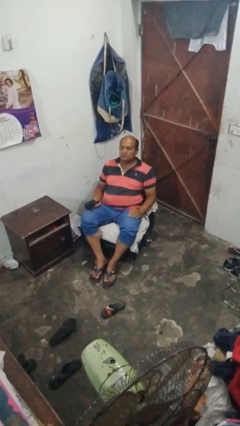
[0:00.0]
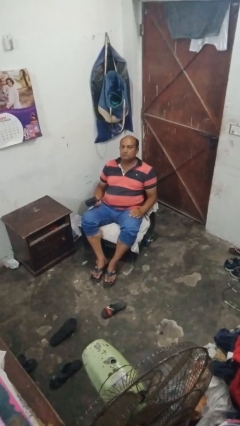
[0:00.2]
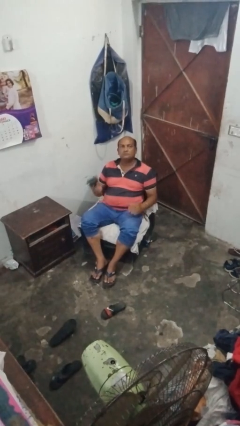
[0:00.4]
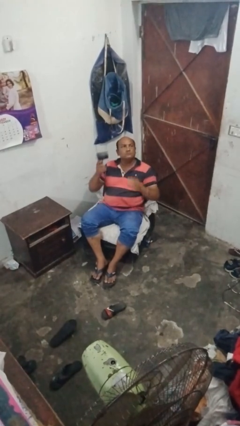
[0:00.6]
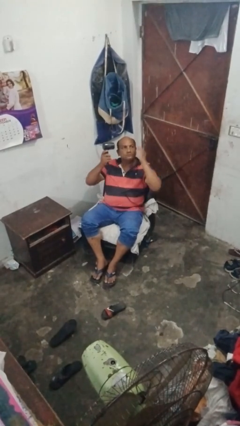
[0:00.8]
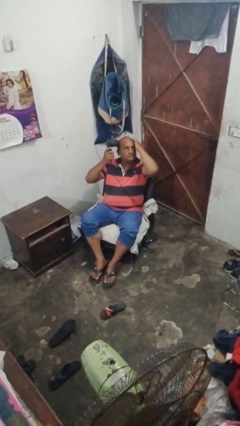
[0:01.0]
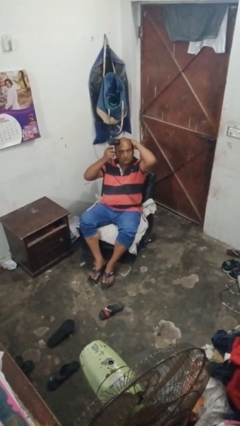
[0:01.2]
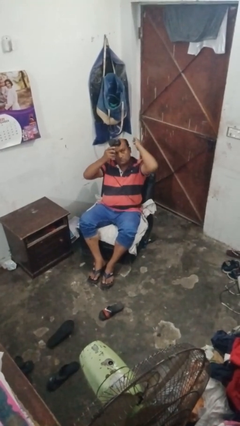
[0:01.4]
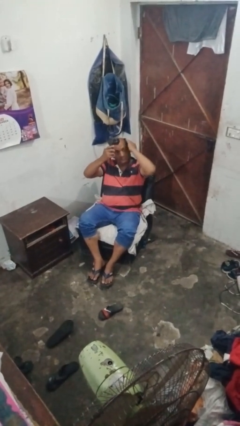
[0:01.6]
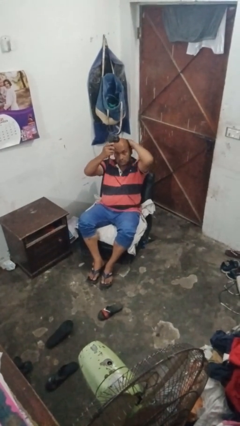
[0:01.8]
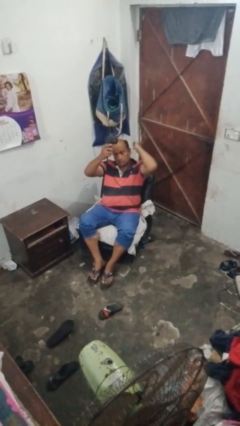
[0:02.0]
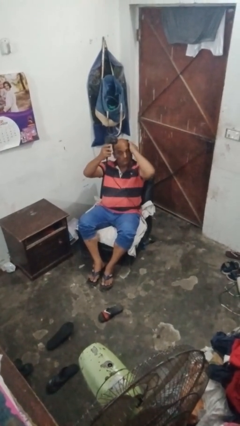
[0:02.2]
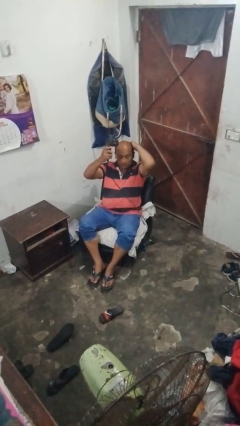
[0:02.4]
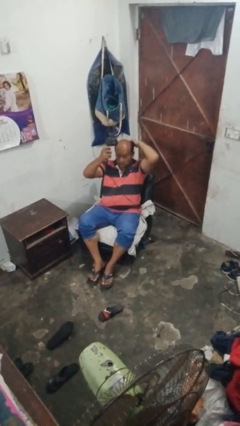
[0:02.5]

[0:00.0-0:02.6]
person dries hair with hairdryer

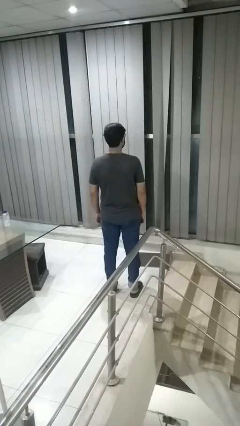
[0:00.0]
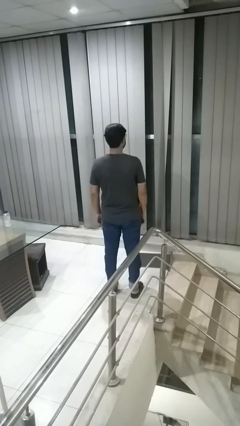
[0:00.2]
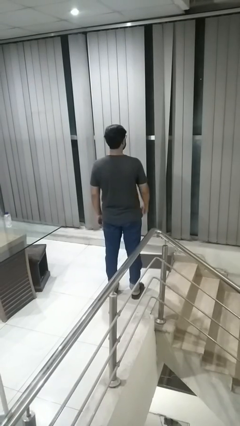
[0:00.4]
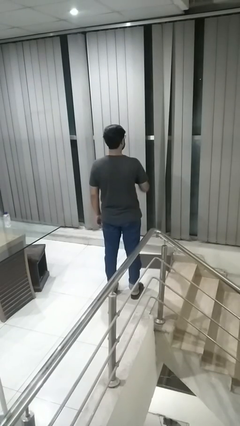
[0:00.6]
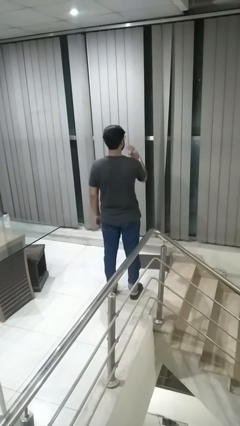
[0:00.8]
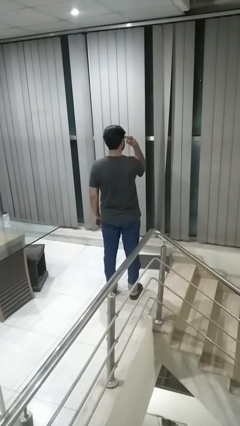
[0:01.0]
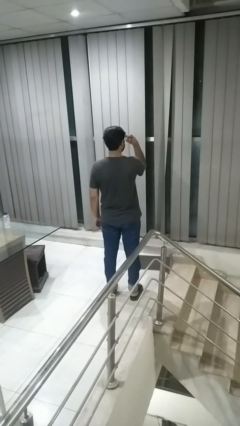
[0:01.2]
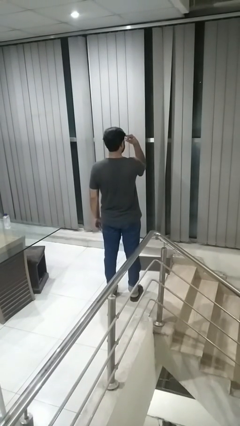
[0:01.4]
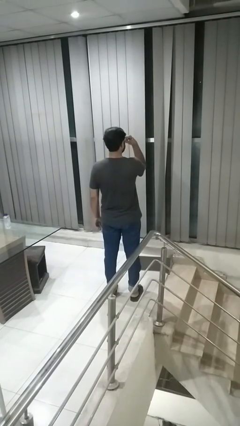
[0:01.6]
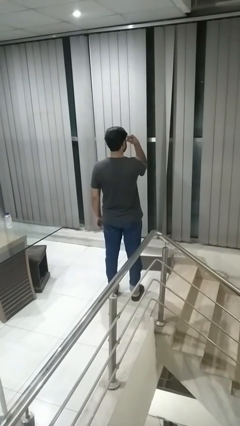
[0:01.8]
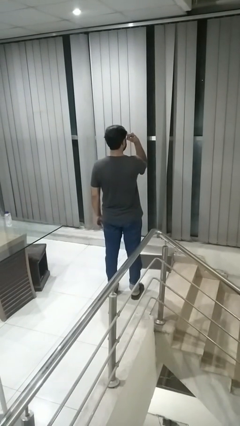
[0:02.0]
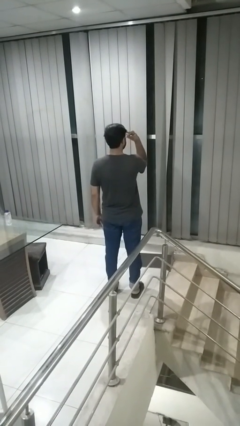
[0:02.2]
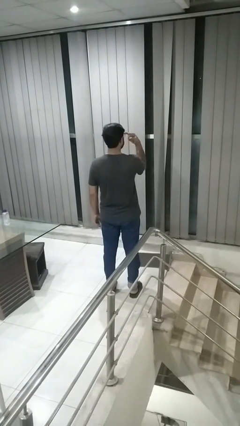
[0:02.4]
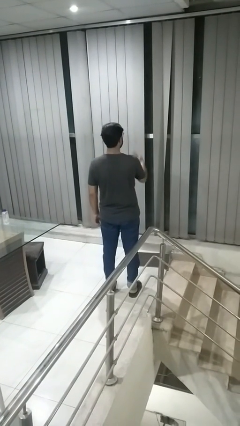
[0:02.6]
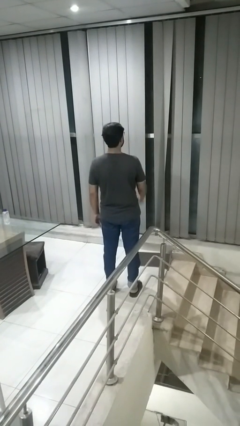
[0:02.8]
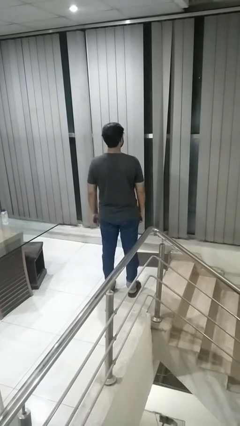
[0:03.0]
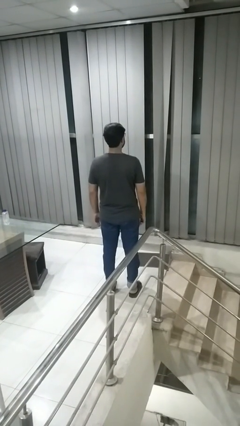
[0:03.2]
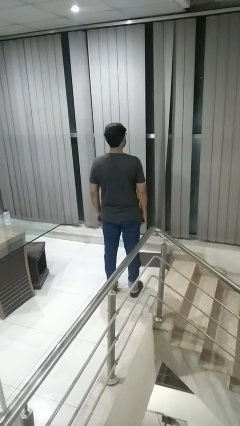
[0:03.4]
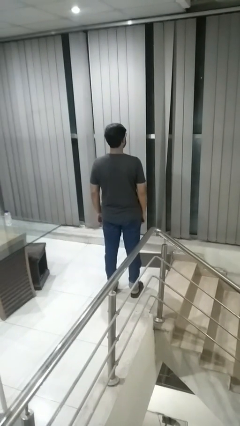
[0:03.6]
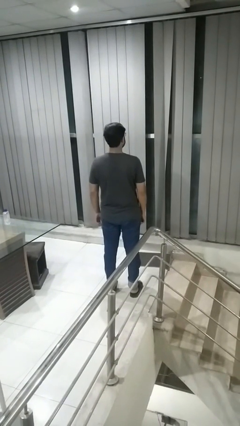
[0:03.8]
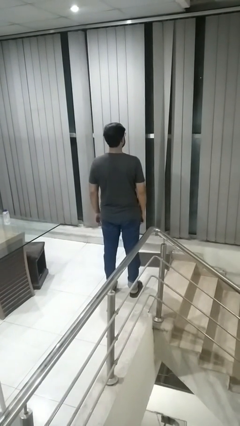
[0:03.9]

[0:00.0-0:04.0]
person gestures watch closely

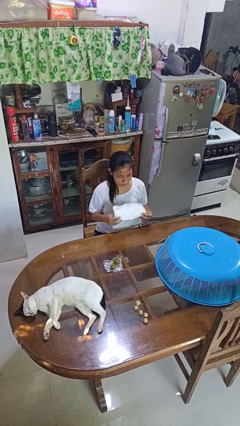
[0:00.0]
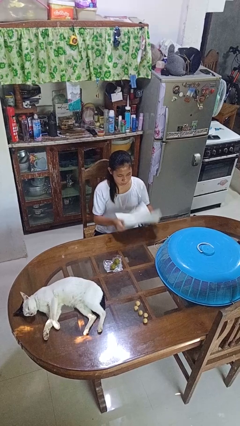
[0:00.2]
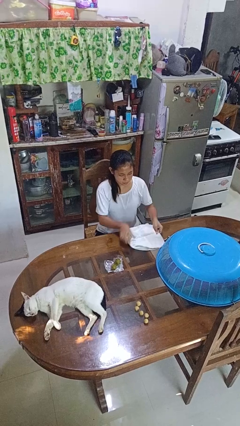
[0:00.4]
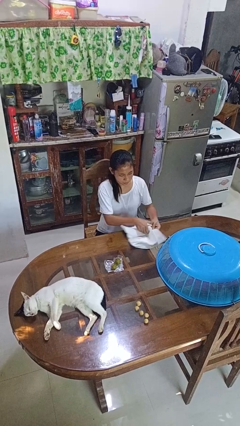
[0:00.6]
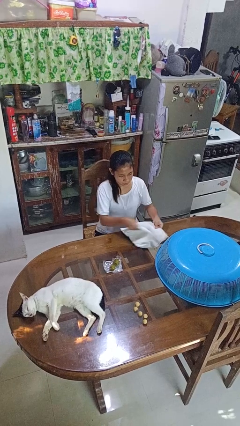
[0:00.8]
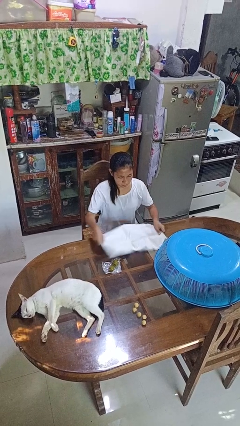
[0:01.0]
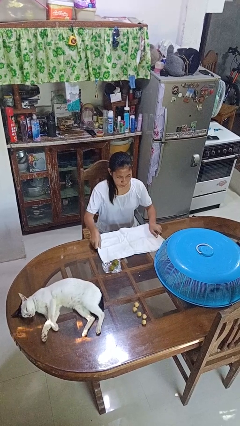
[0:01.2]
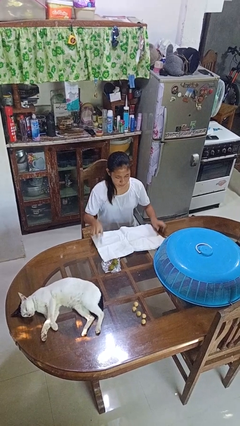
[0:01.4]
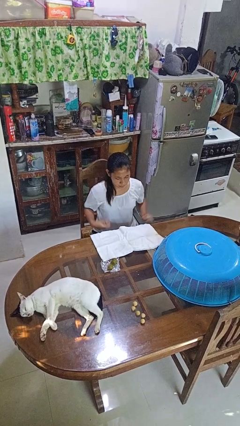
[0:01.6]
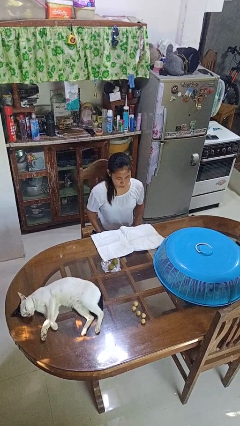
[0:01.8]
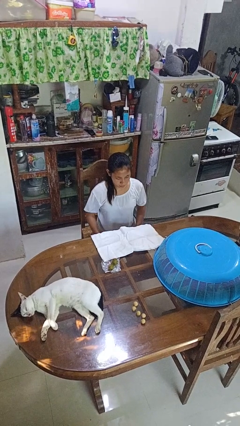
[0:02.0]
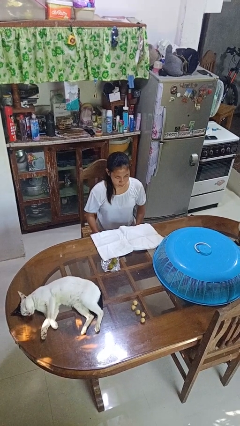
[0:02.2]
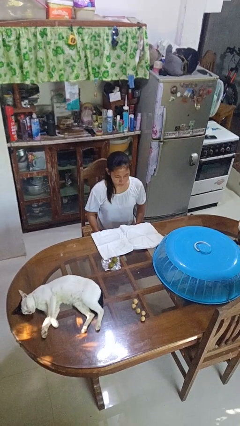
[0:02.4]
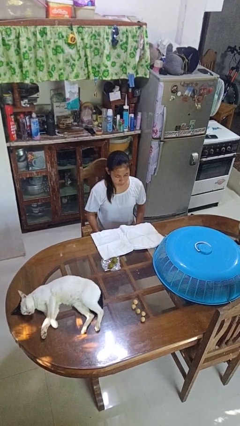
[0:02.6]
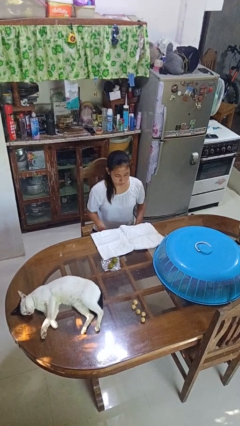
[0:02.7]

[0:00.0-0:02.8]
person spreads tablecloth

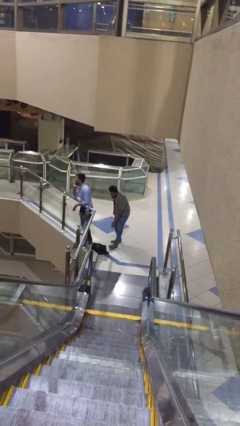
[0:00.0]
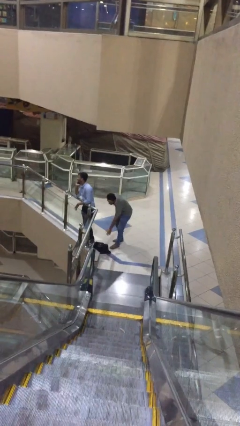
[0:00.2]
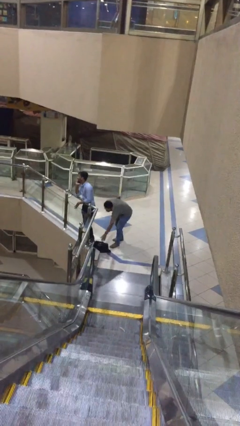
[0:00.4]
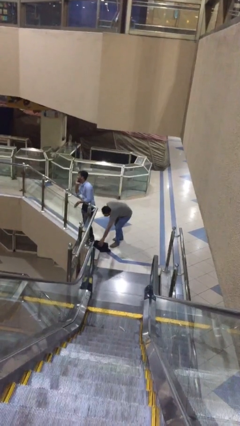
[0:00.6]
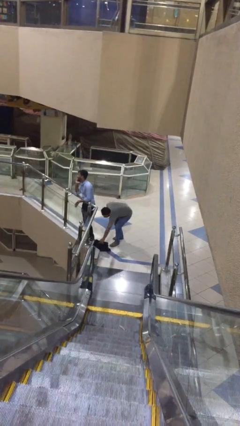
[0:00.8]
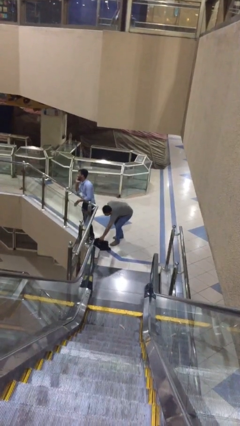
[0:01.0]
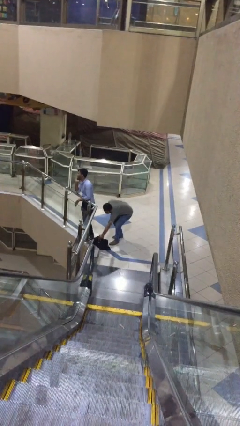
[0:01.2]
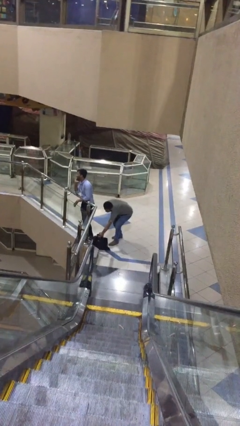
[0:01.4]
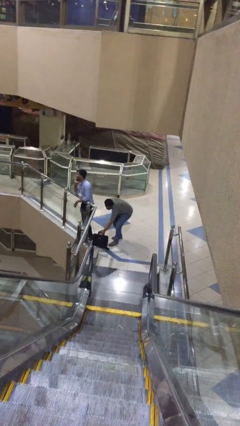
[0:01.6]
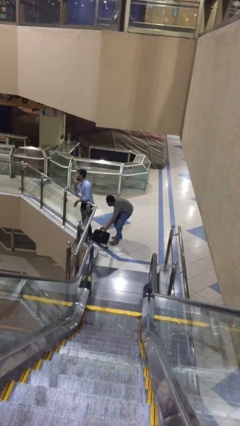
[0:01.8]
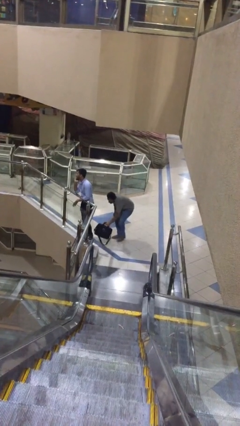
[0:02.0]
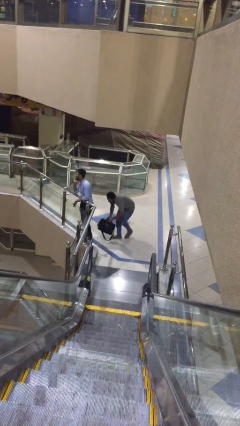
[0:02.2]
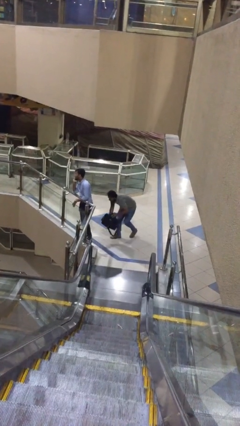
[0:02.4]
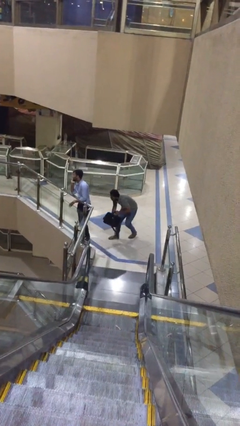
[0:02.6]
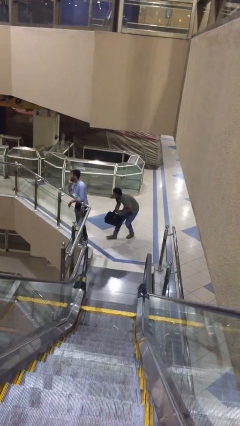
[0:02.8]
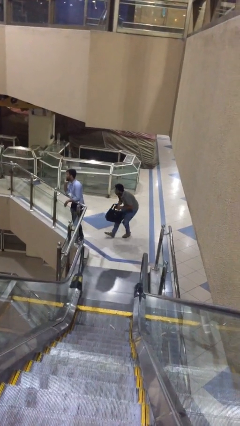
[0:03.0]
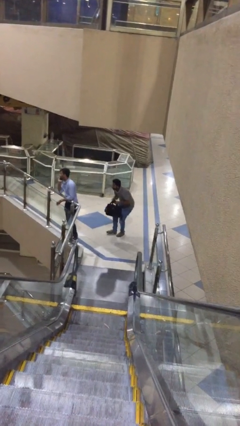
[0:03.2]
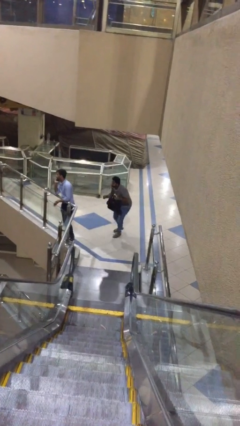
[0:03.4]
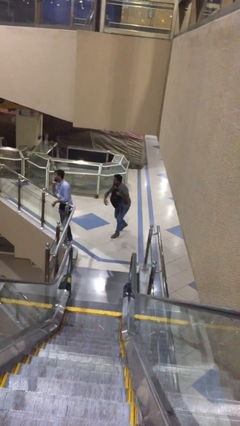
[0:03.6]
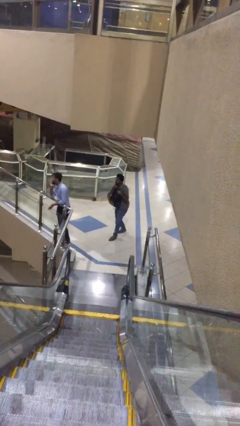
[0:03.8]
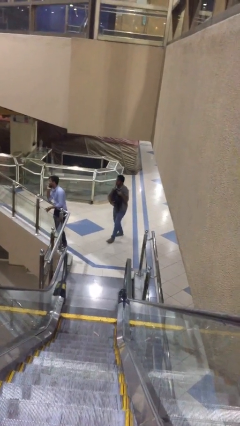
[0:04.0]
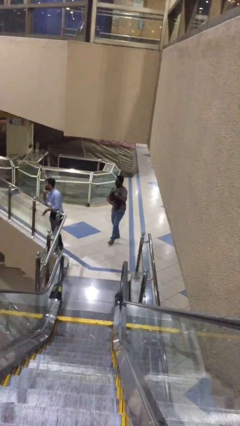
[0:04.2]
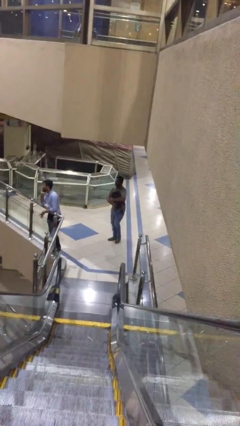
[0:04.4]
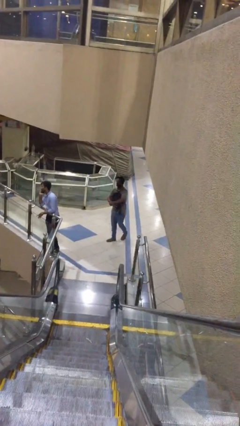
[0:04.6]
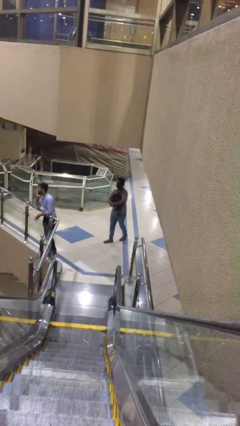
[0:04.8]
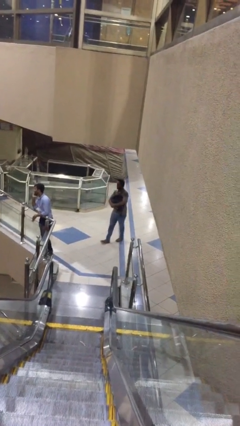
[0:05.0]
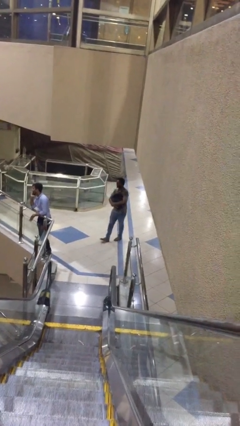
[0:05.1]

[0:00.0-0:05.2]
person steals object from person

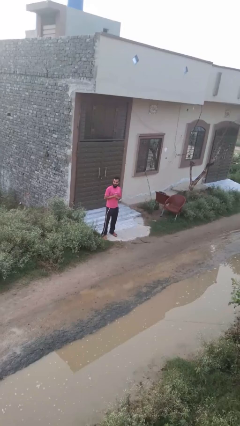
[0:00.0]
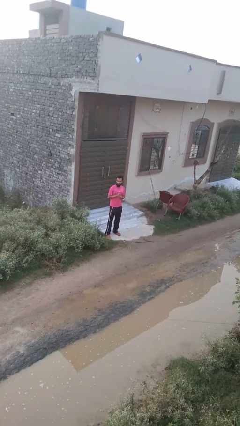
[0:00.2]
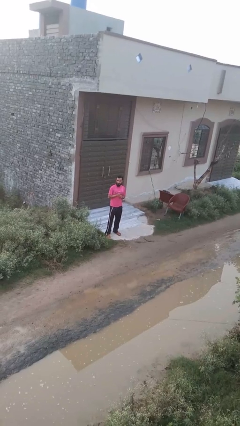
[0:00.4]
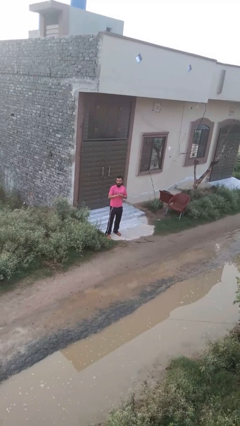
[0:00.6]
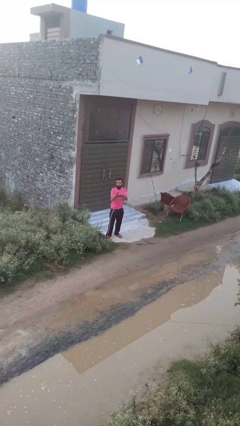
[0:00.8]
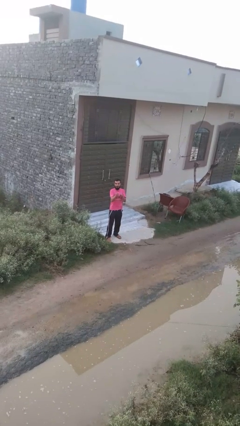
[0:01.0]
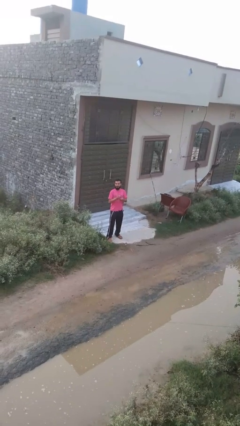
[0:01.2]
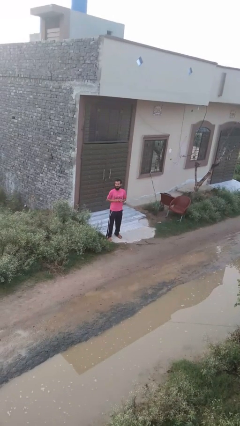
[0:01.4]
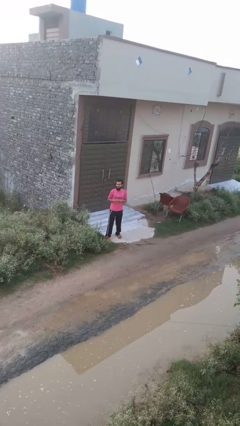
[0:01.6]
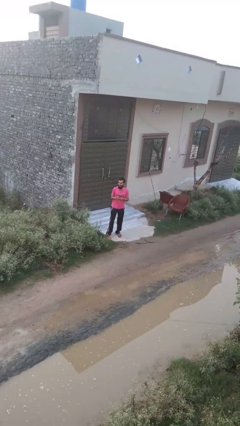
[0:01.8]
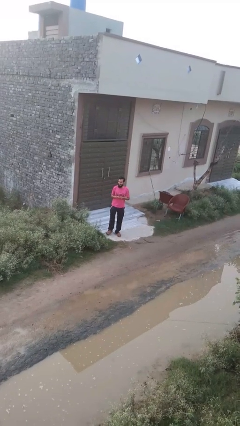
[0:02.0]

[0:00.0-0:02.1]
person punches

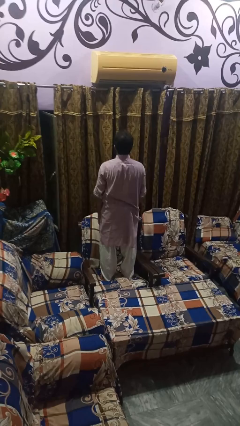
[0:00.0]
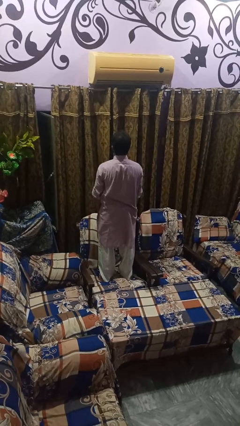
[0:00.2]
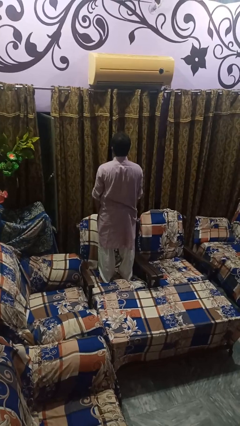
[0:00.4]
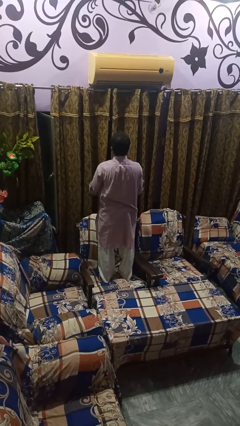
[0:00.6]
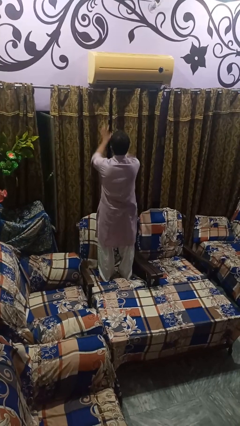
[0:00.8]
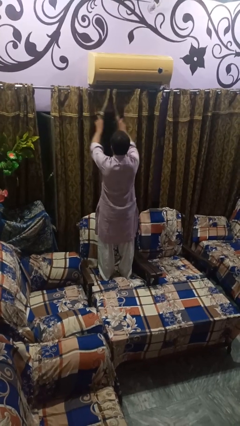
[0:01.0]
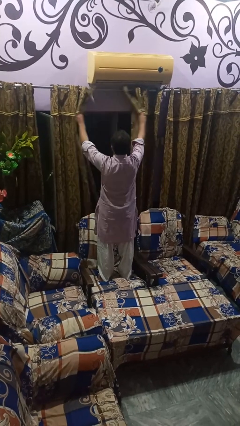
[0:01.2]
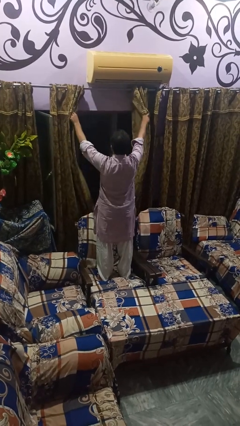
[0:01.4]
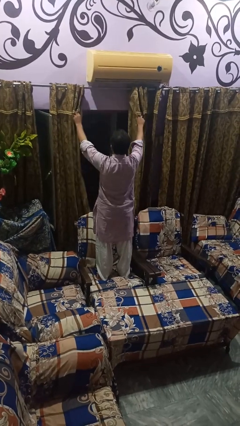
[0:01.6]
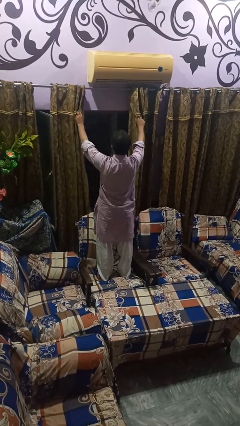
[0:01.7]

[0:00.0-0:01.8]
person opens curtains
